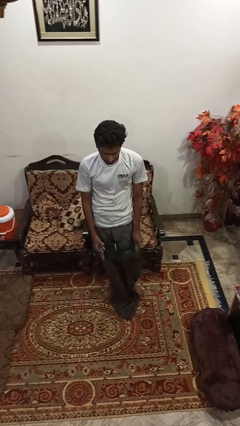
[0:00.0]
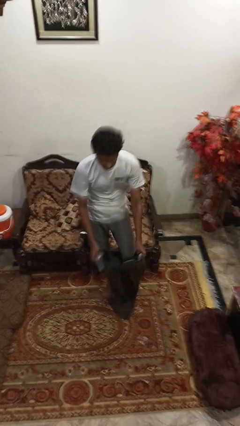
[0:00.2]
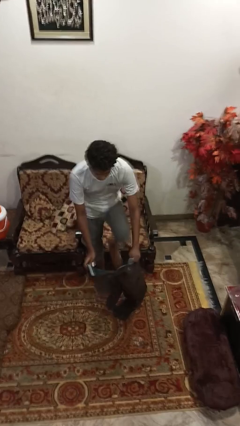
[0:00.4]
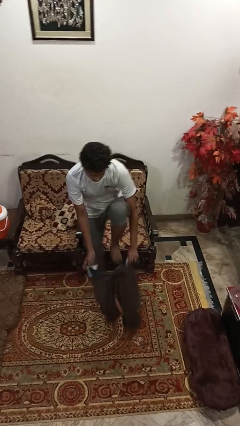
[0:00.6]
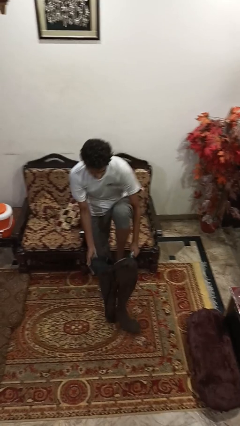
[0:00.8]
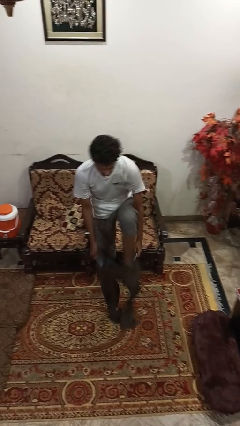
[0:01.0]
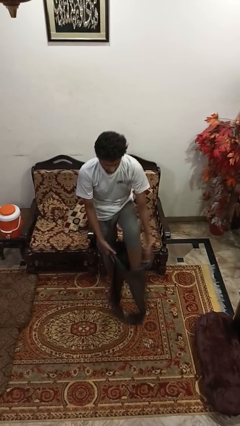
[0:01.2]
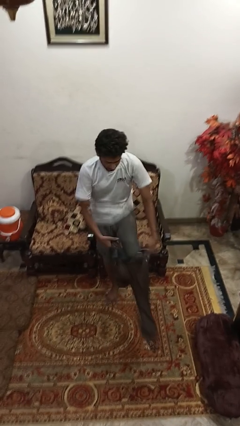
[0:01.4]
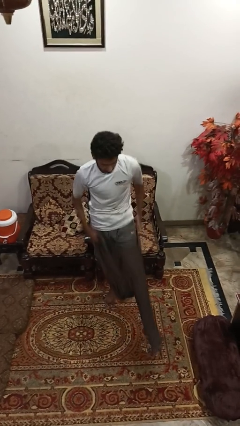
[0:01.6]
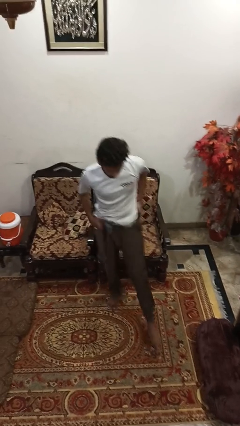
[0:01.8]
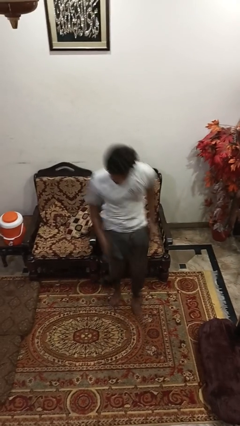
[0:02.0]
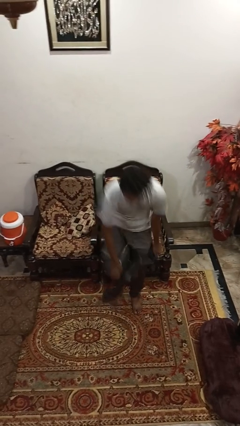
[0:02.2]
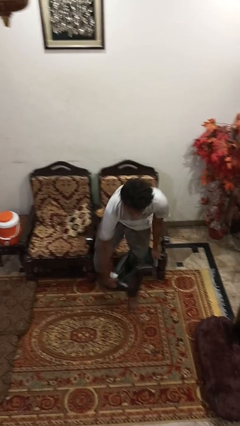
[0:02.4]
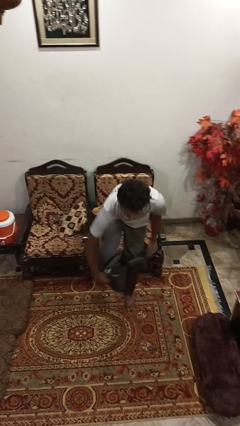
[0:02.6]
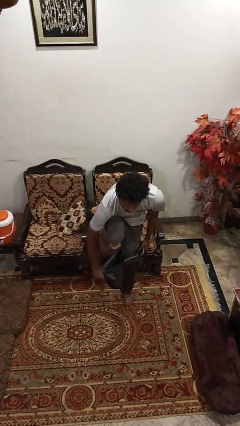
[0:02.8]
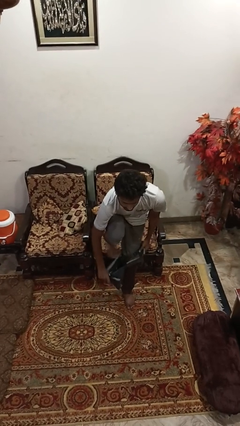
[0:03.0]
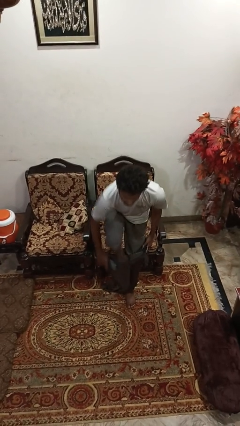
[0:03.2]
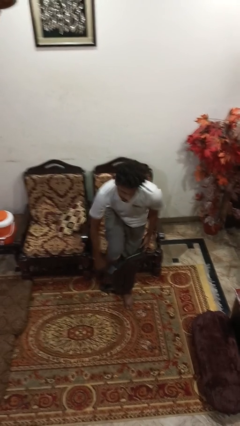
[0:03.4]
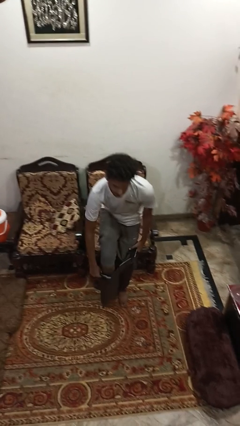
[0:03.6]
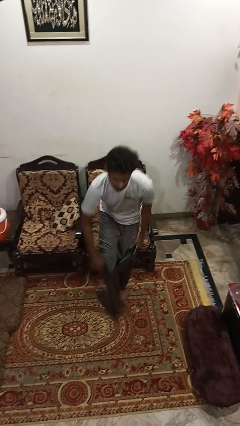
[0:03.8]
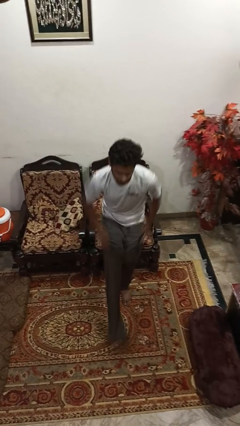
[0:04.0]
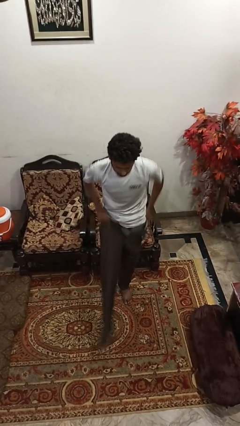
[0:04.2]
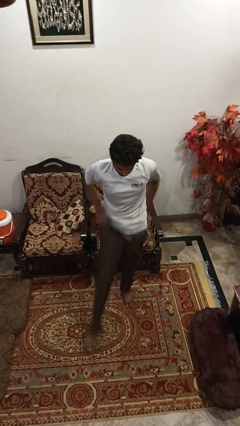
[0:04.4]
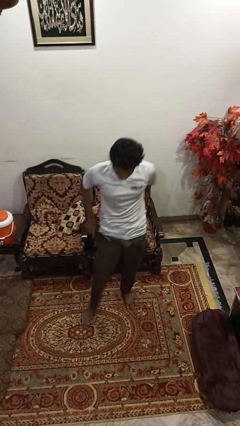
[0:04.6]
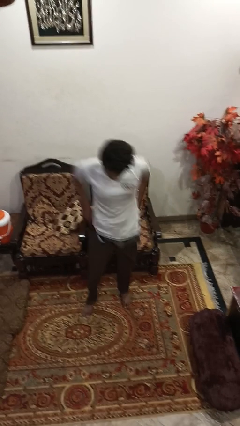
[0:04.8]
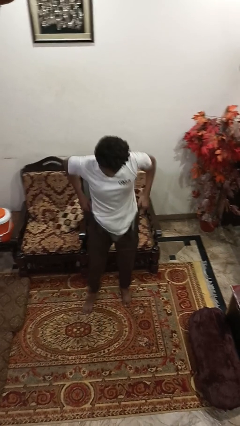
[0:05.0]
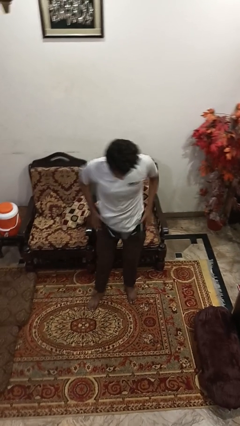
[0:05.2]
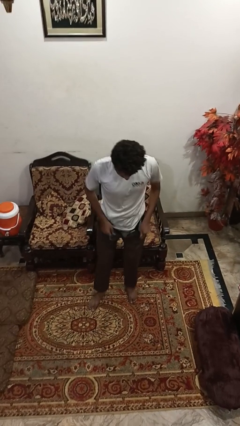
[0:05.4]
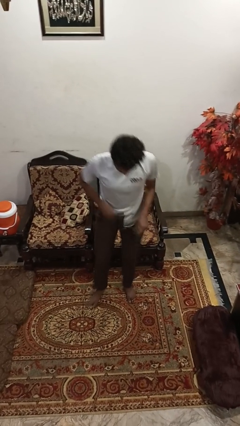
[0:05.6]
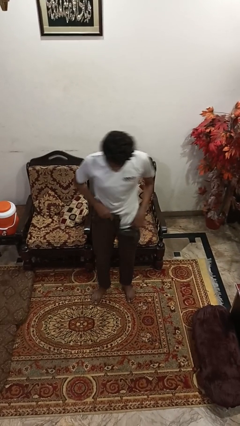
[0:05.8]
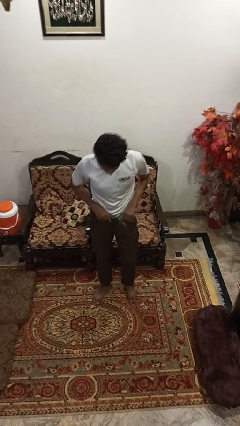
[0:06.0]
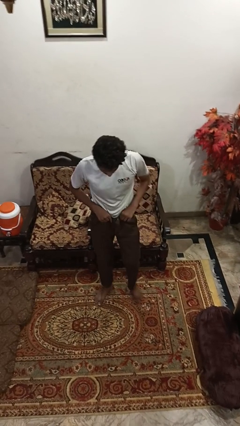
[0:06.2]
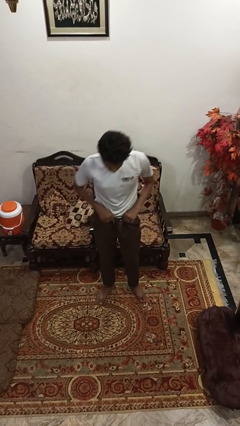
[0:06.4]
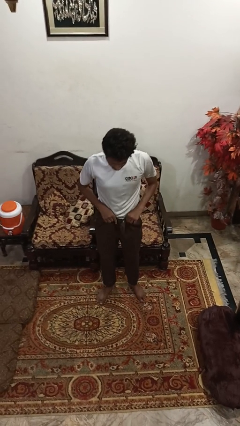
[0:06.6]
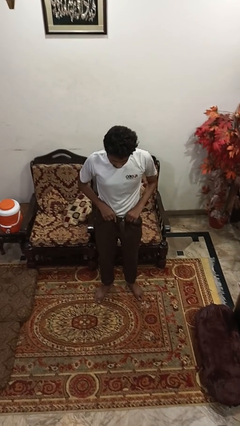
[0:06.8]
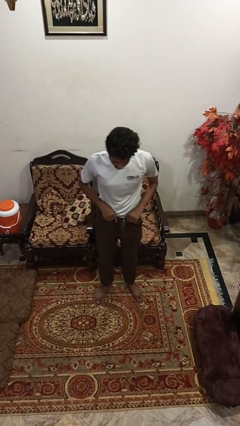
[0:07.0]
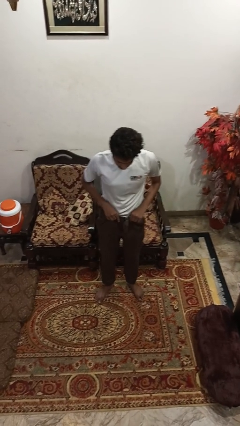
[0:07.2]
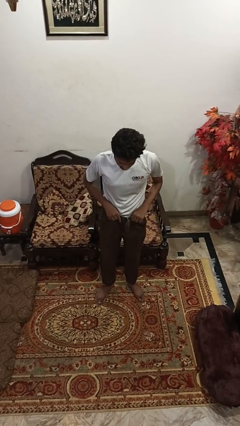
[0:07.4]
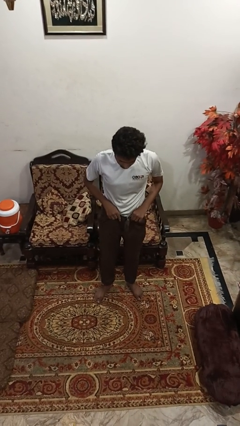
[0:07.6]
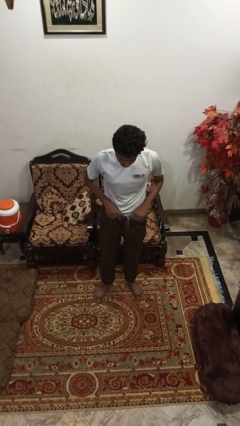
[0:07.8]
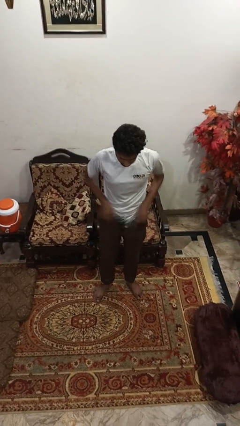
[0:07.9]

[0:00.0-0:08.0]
person puts on pants

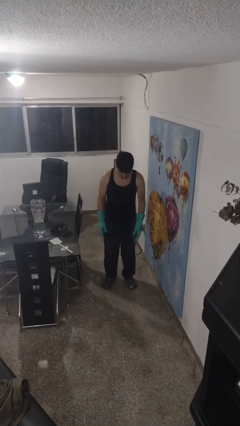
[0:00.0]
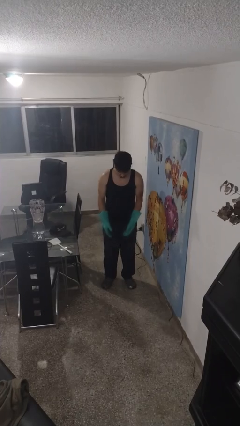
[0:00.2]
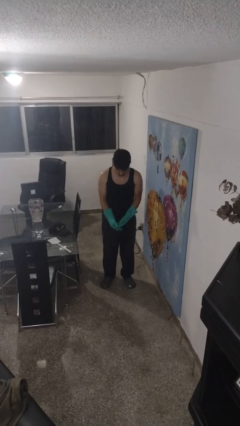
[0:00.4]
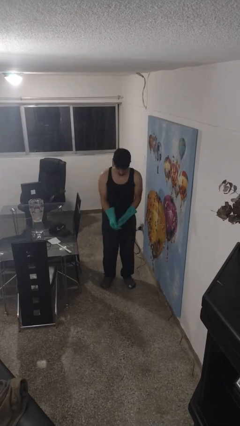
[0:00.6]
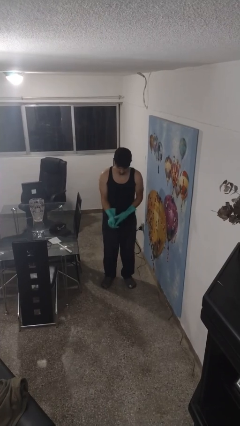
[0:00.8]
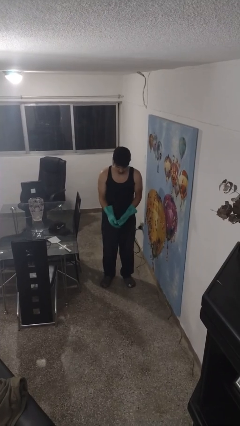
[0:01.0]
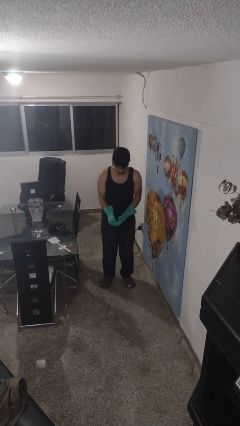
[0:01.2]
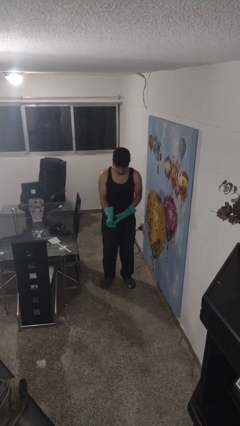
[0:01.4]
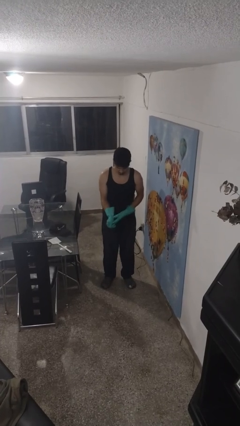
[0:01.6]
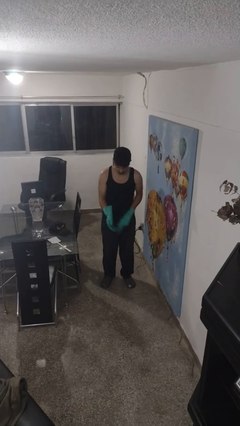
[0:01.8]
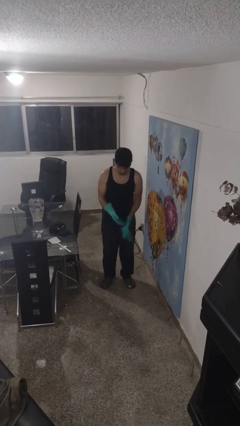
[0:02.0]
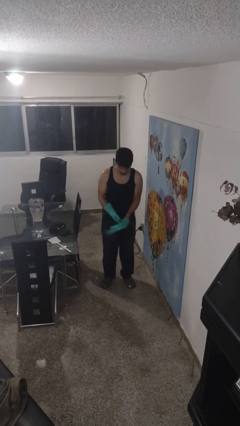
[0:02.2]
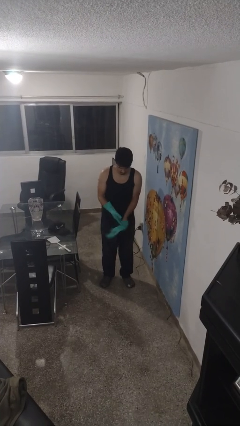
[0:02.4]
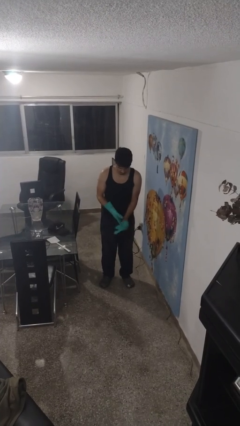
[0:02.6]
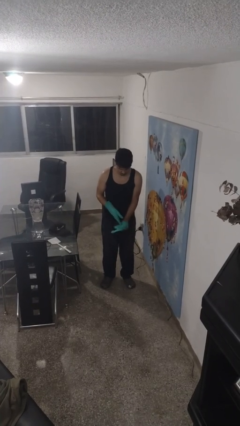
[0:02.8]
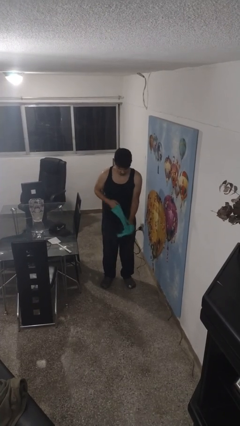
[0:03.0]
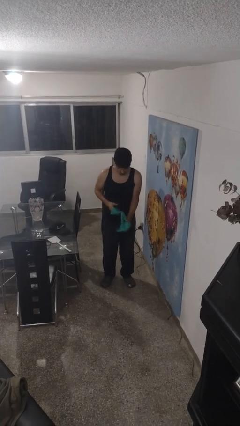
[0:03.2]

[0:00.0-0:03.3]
person takes off gloves

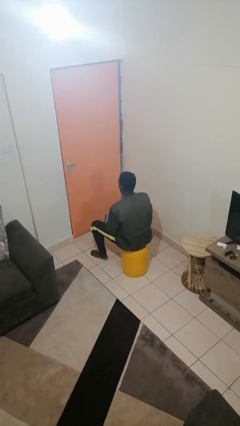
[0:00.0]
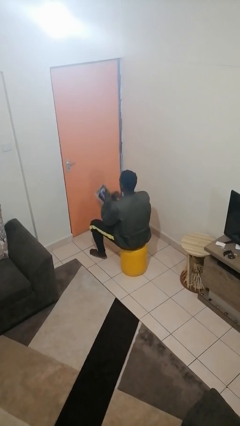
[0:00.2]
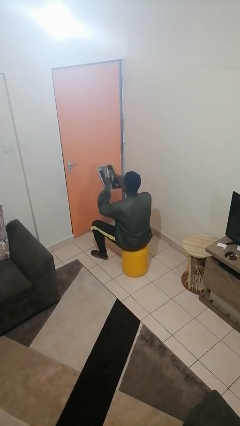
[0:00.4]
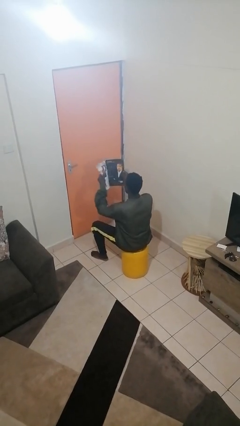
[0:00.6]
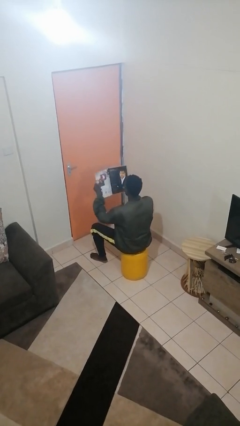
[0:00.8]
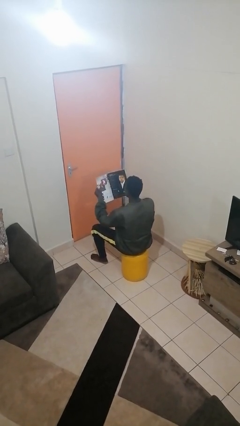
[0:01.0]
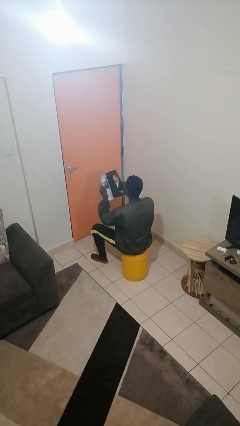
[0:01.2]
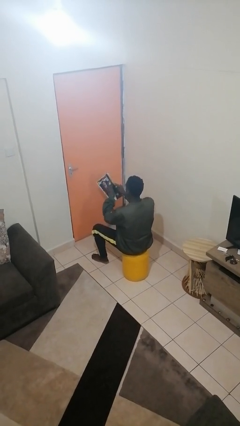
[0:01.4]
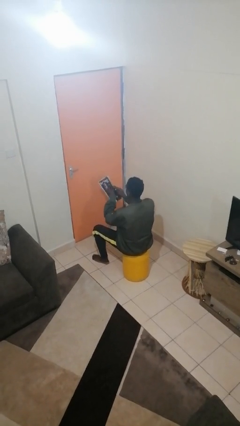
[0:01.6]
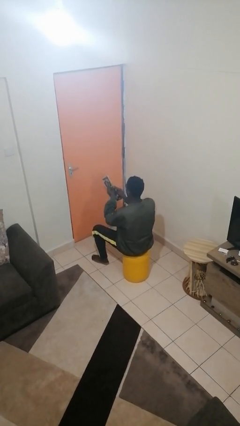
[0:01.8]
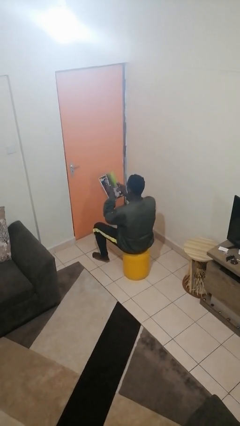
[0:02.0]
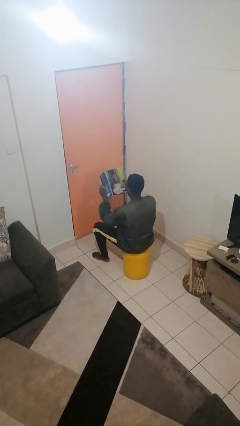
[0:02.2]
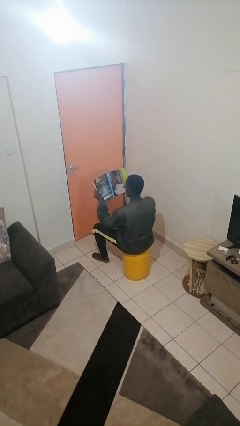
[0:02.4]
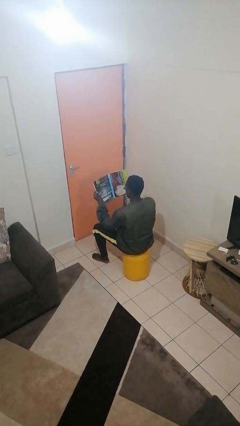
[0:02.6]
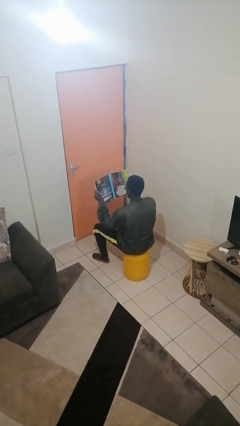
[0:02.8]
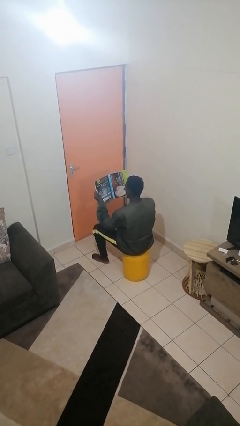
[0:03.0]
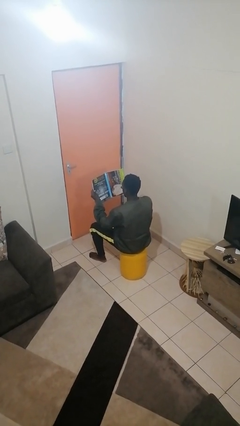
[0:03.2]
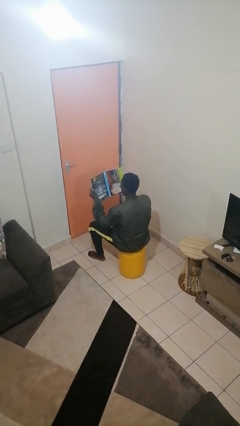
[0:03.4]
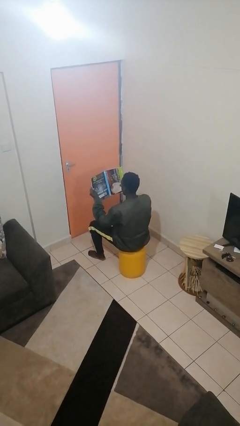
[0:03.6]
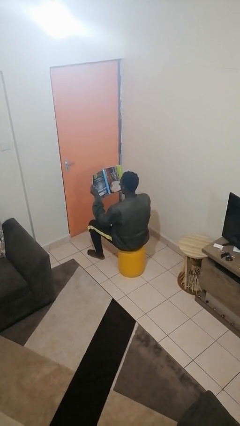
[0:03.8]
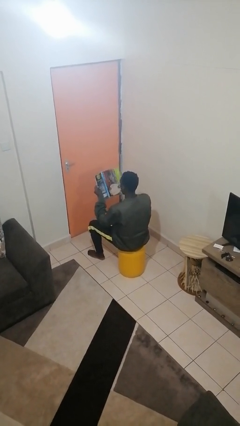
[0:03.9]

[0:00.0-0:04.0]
person reads magazine

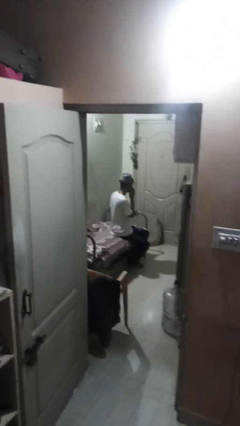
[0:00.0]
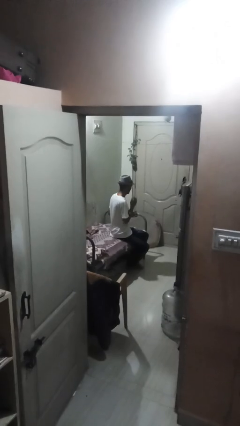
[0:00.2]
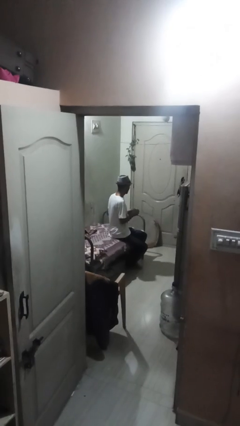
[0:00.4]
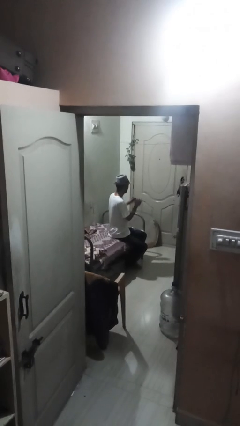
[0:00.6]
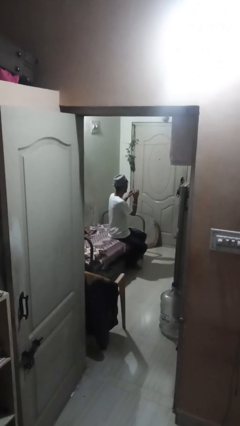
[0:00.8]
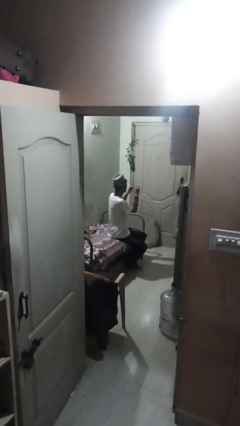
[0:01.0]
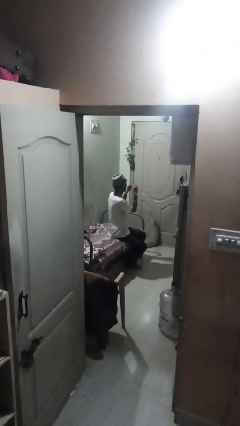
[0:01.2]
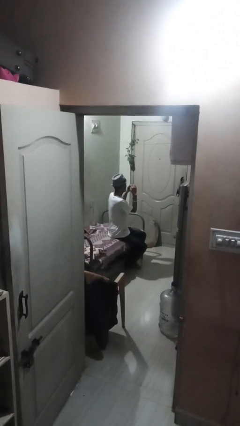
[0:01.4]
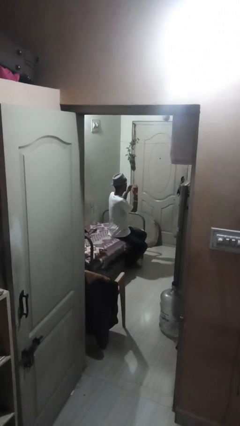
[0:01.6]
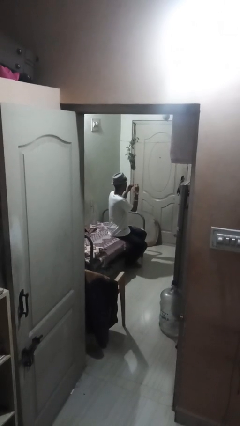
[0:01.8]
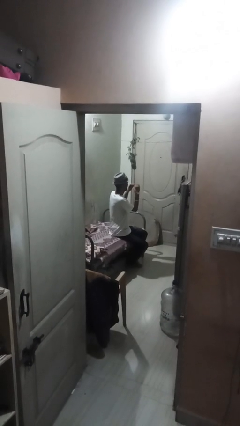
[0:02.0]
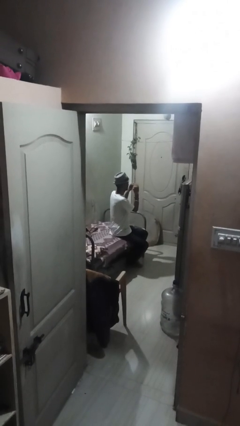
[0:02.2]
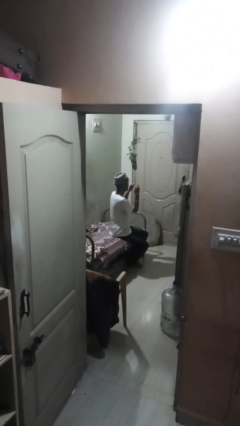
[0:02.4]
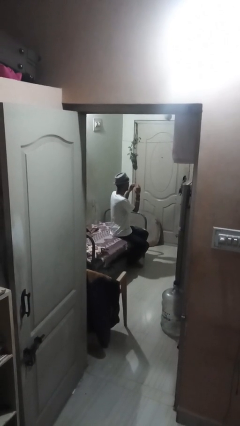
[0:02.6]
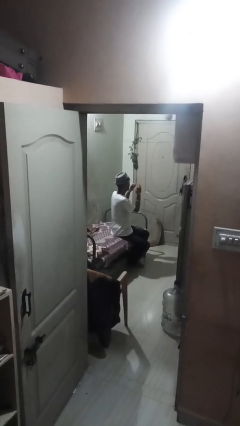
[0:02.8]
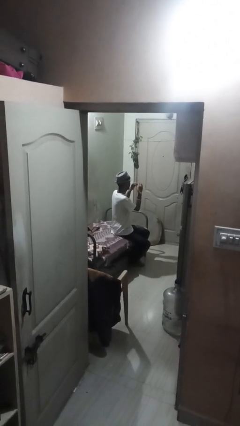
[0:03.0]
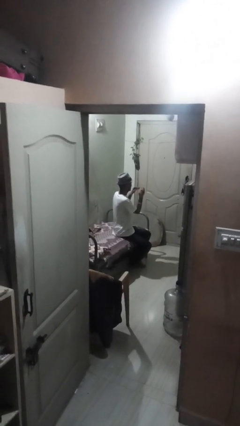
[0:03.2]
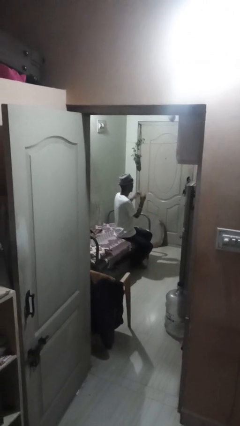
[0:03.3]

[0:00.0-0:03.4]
person files fingernails
